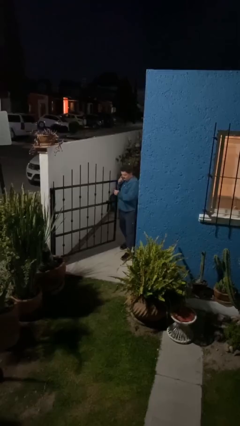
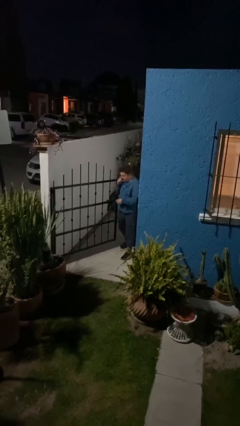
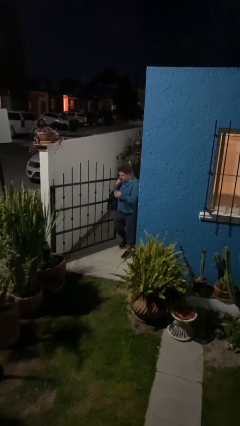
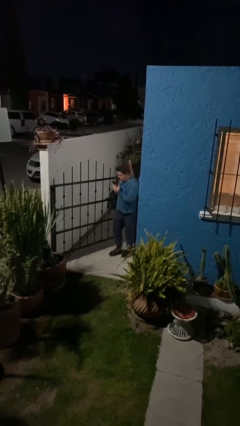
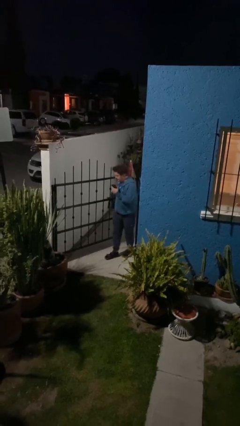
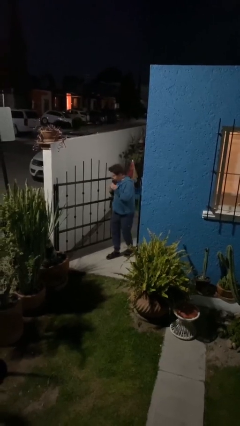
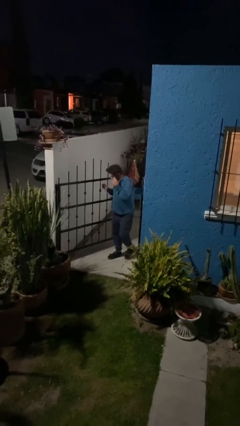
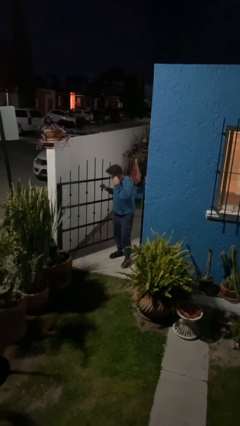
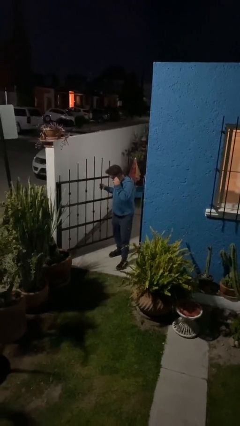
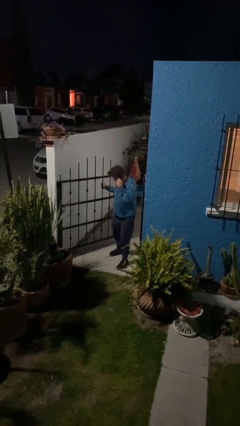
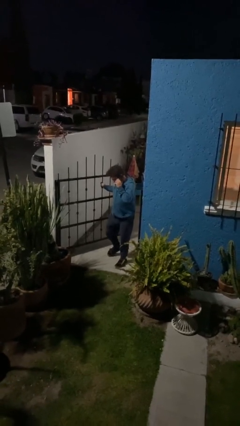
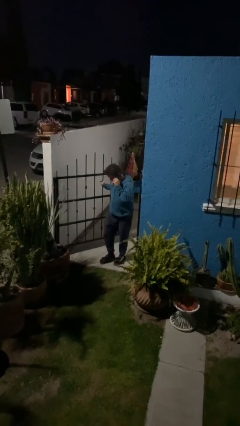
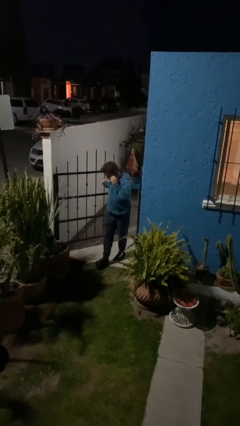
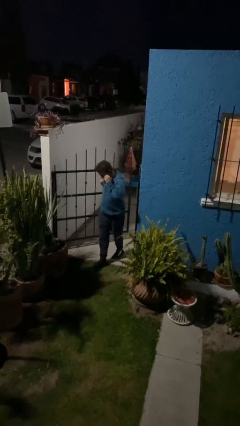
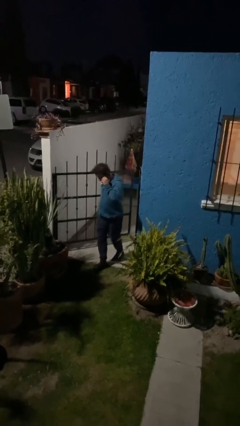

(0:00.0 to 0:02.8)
person enters scene through structure

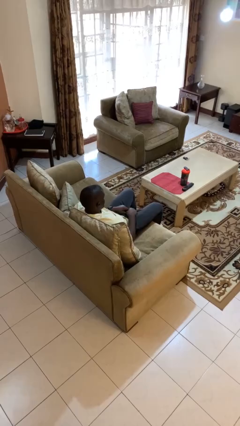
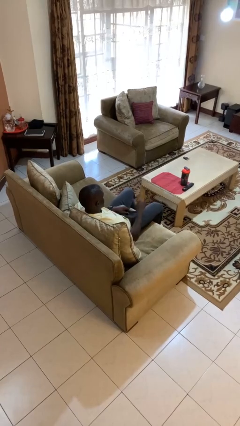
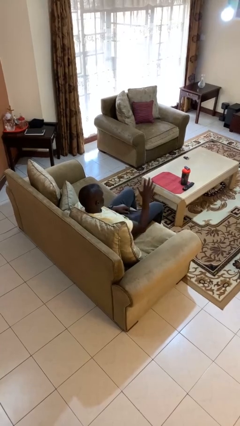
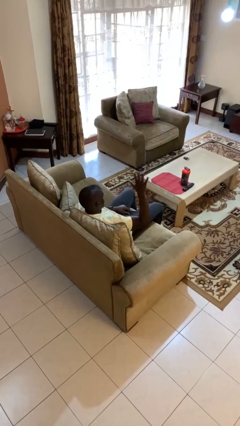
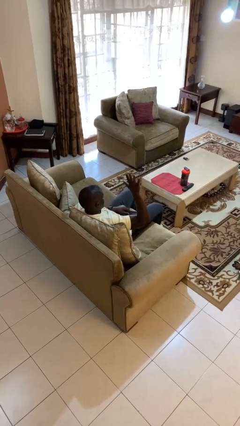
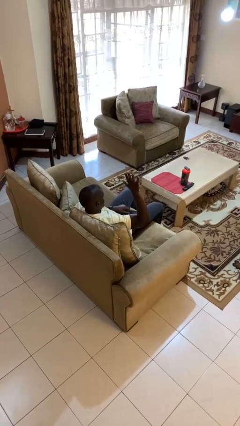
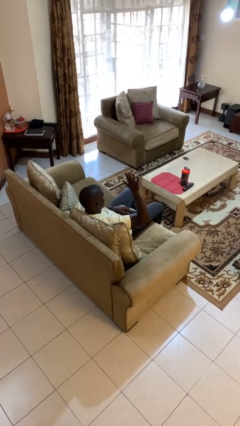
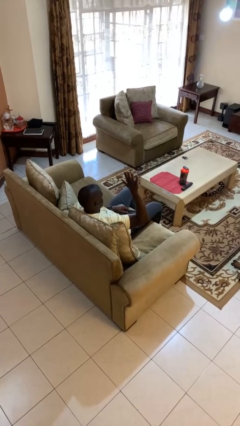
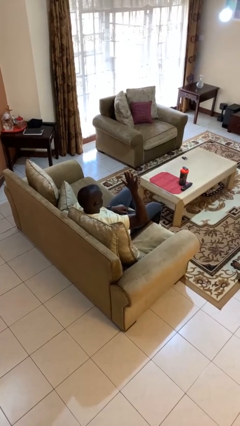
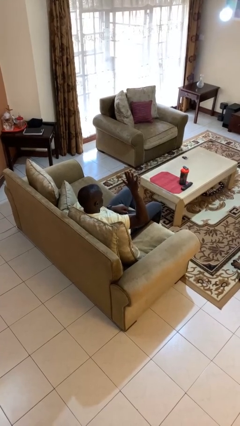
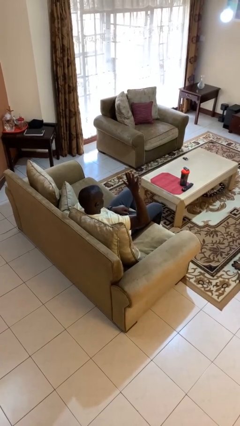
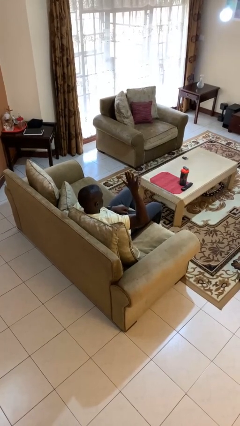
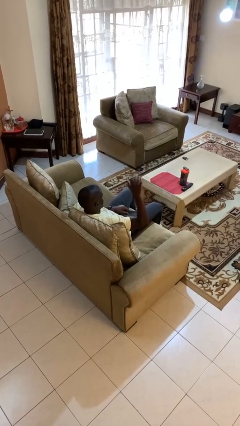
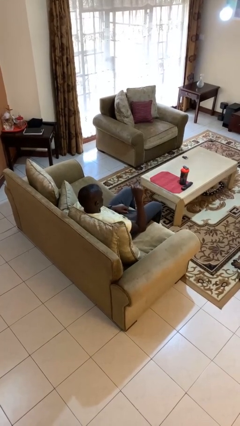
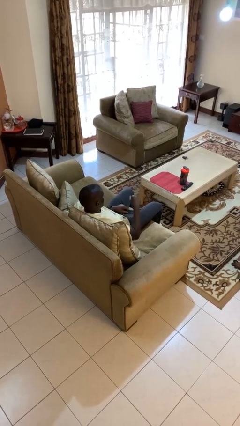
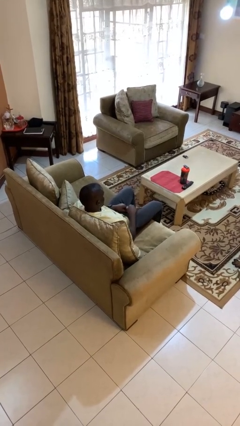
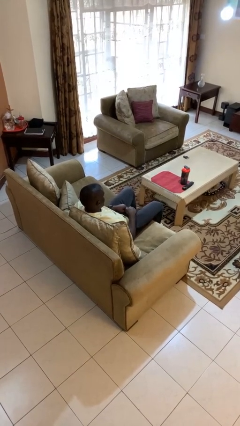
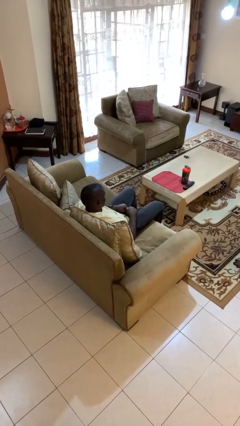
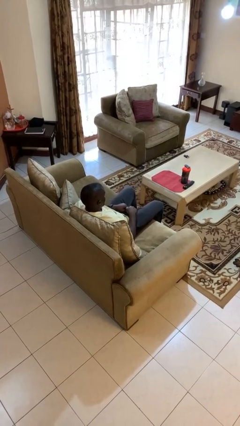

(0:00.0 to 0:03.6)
person gestures number five

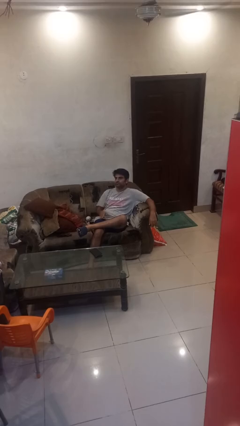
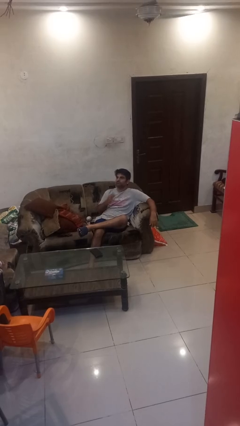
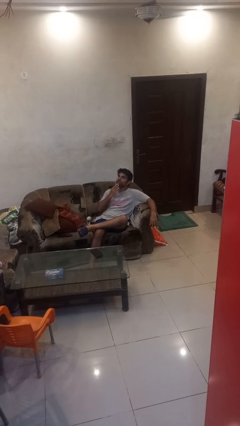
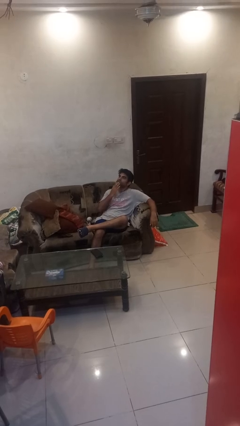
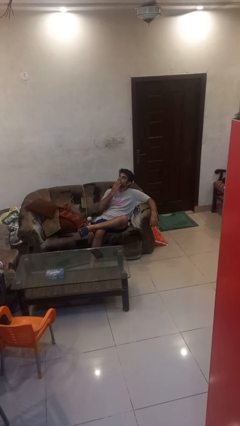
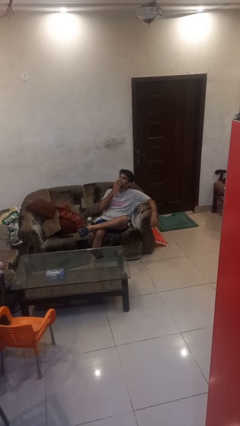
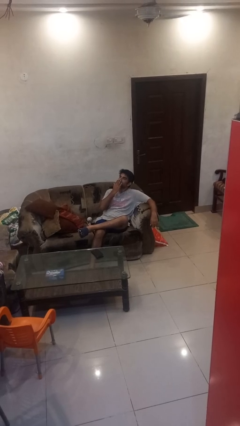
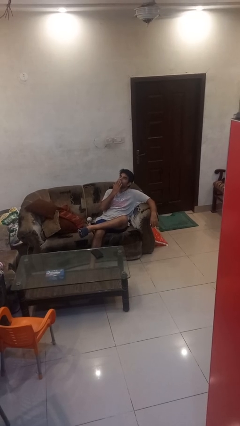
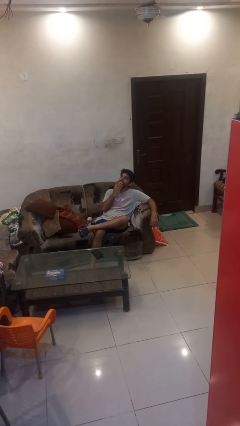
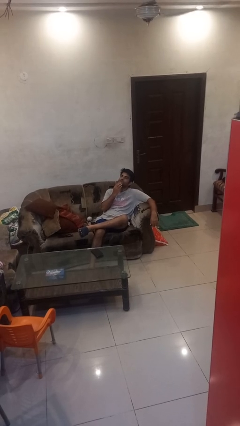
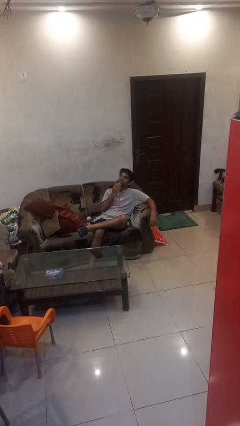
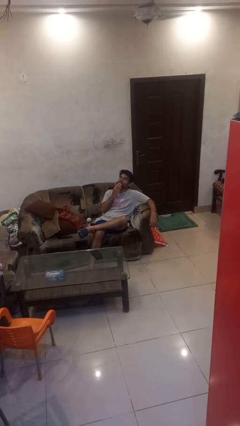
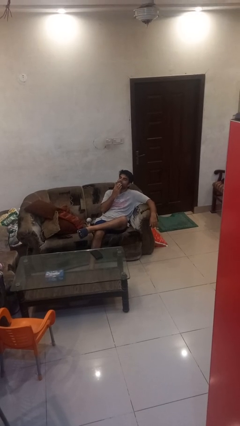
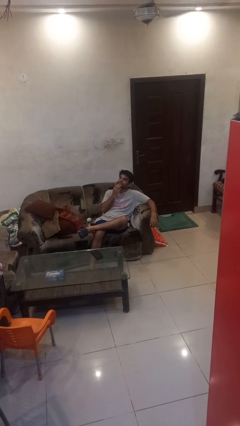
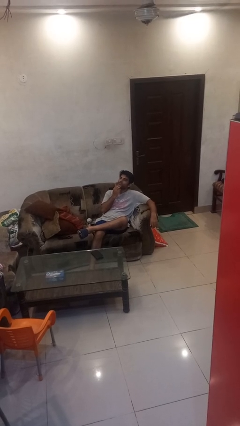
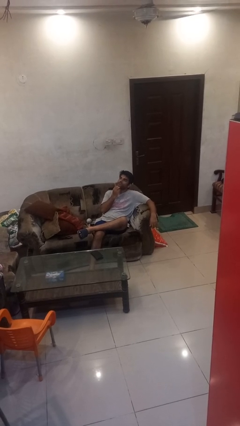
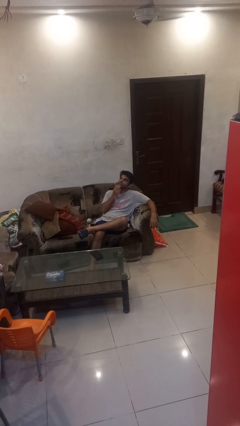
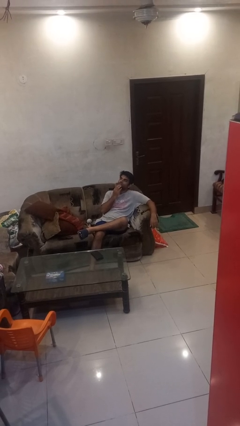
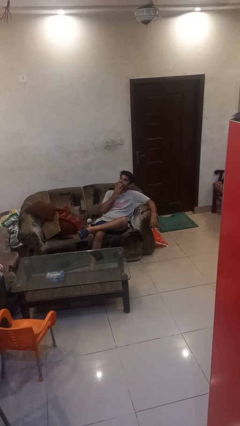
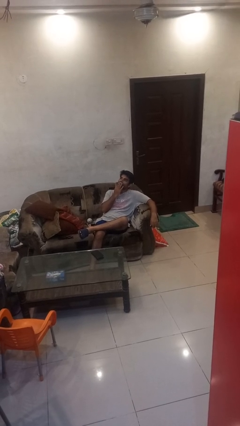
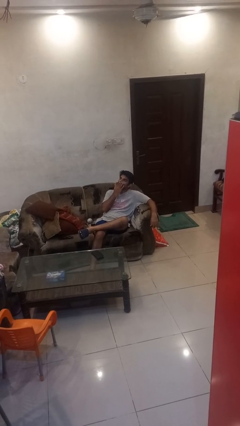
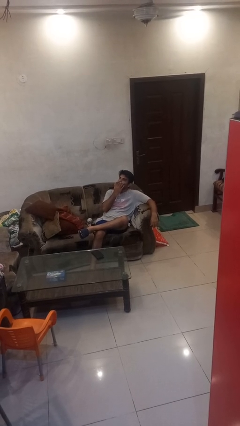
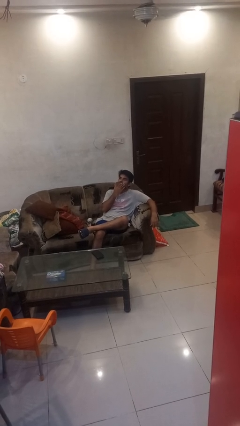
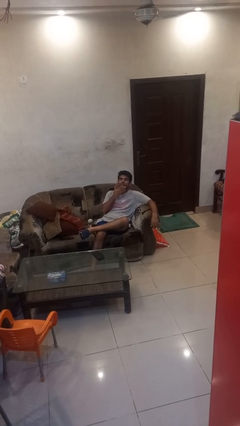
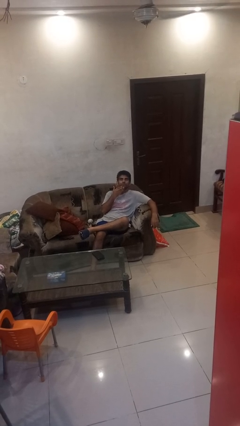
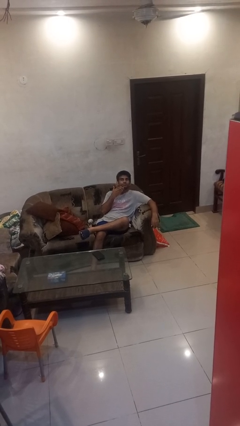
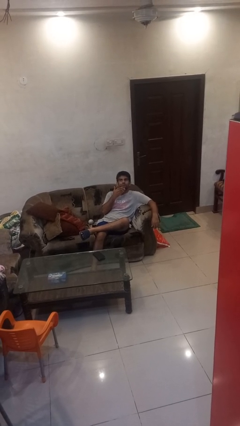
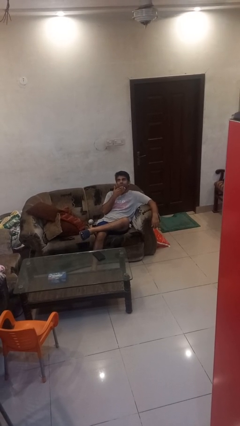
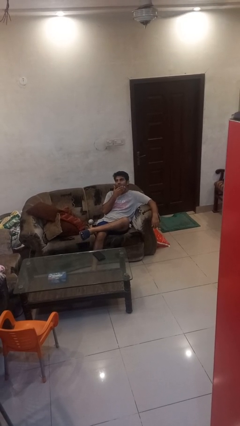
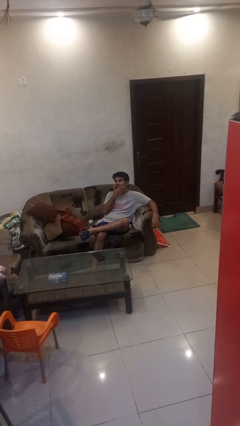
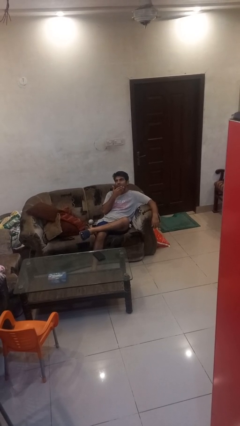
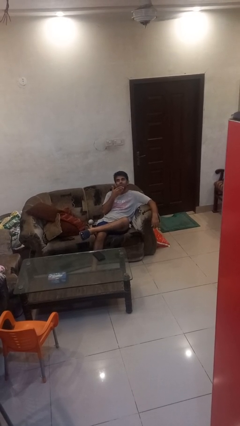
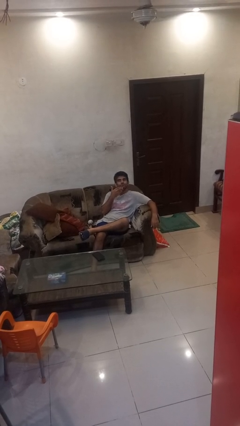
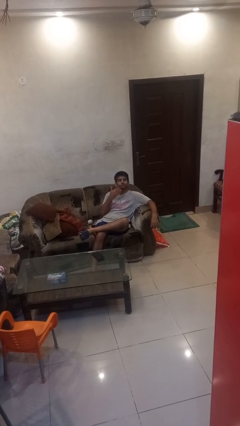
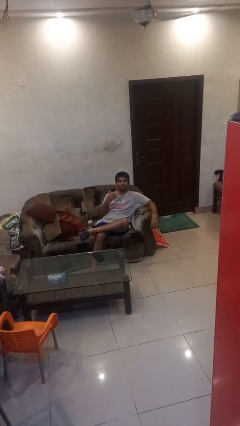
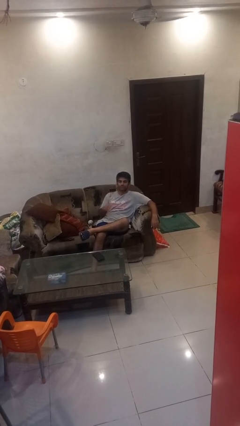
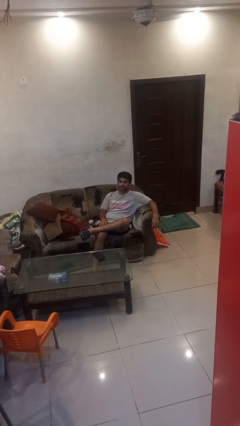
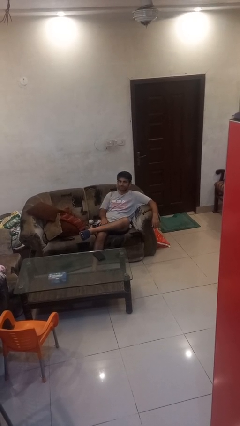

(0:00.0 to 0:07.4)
person strokes chin

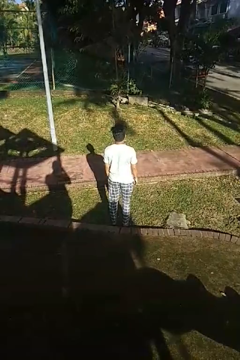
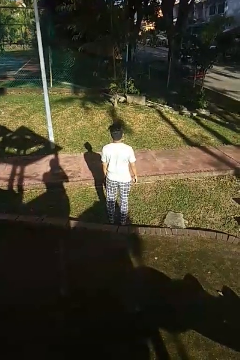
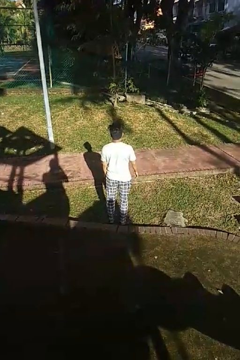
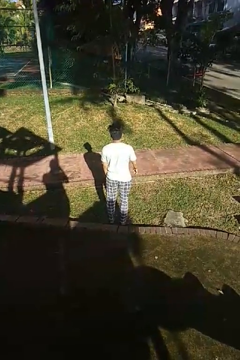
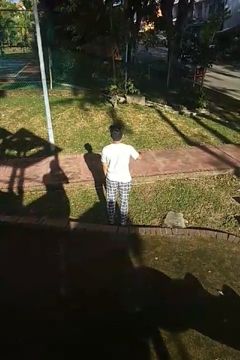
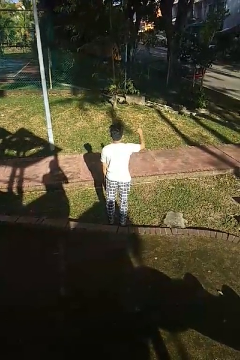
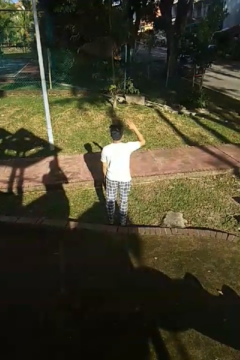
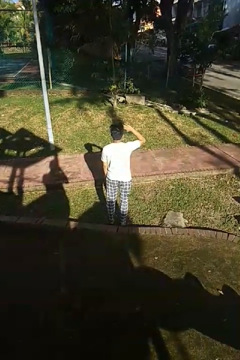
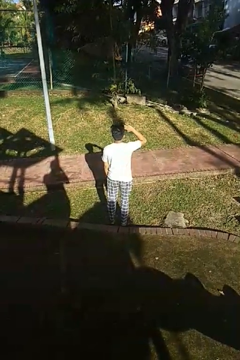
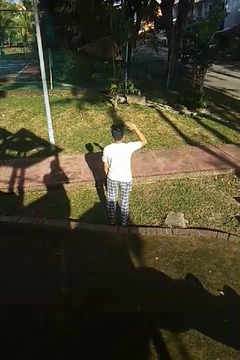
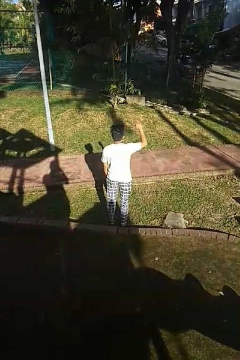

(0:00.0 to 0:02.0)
person salutes

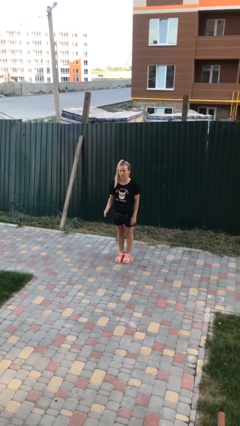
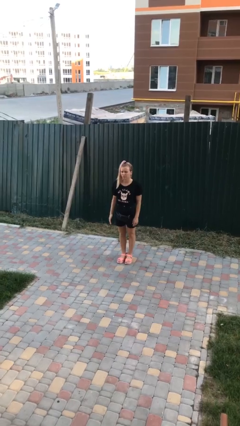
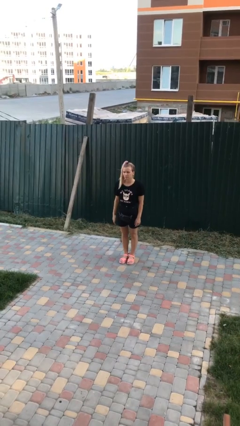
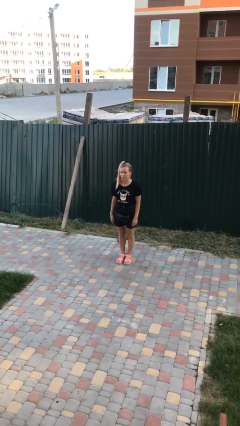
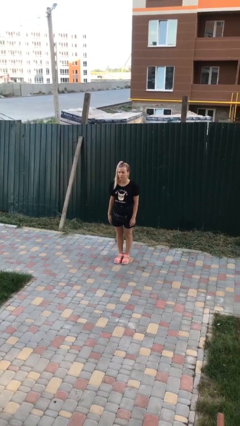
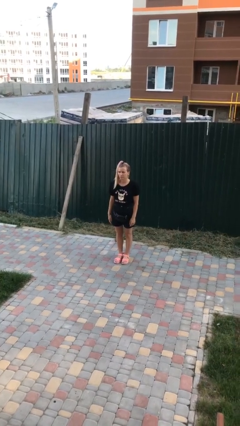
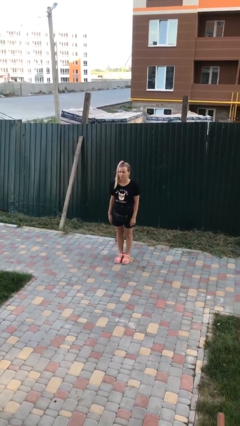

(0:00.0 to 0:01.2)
person gestures lower hand

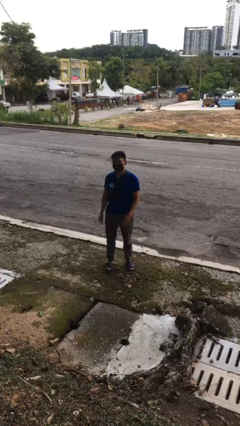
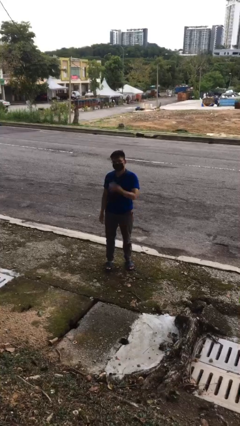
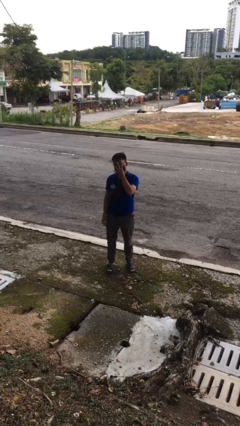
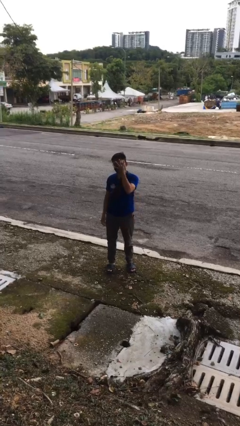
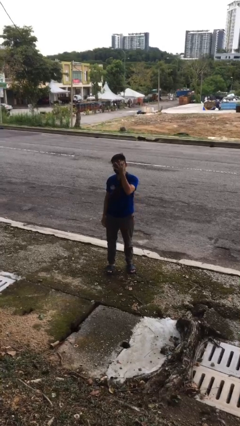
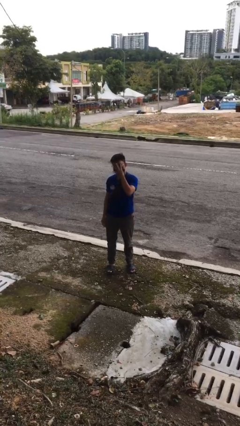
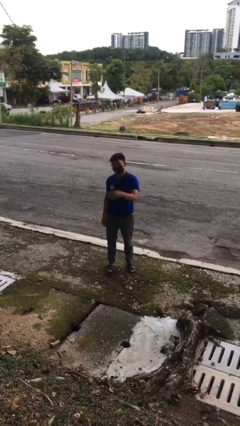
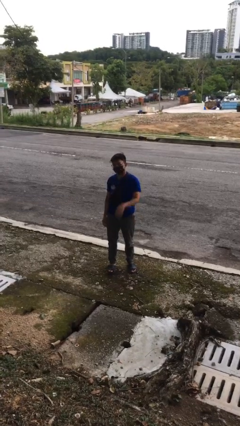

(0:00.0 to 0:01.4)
person gestures number four
